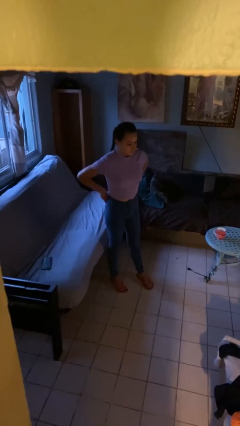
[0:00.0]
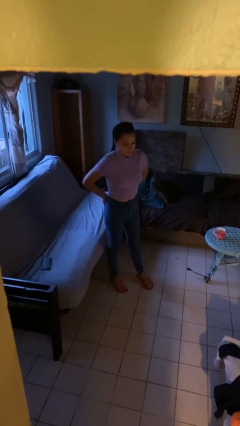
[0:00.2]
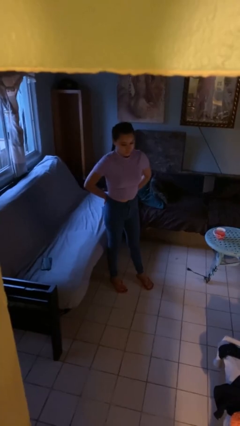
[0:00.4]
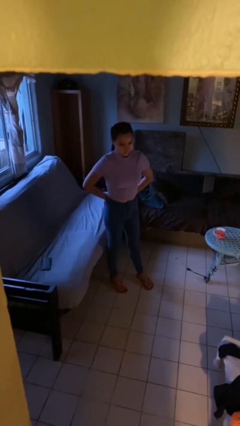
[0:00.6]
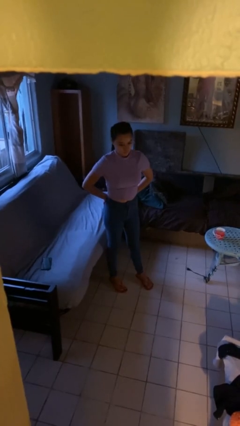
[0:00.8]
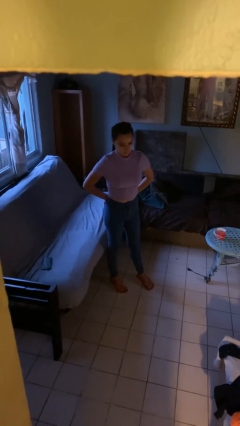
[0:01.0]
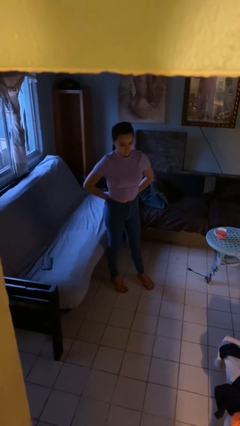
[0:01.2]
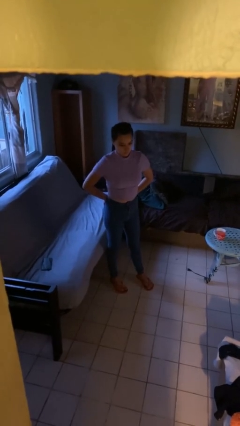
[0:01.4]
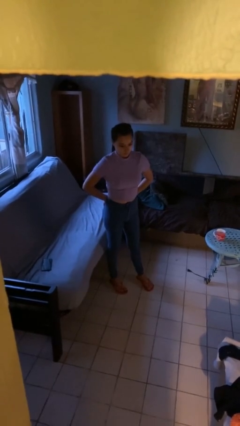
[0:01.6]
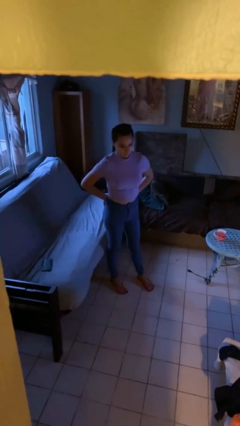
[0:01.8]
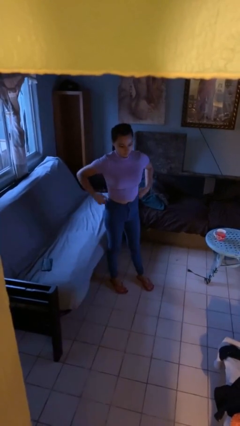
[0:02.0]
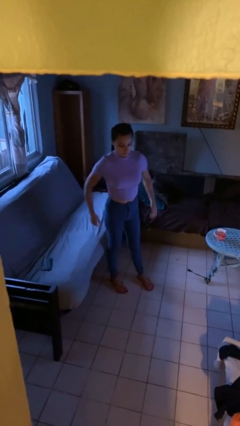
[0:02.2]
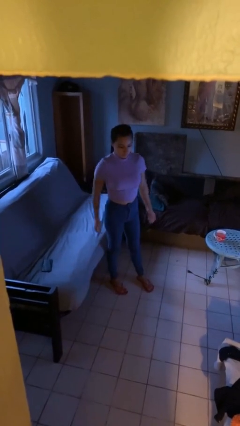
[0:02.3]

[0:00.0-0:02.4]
person puts hands in back pockets

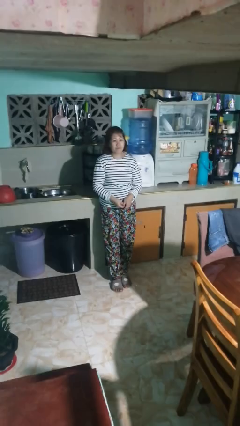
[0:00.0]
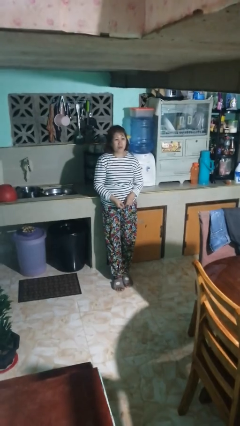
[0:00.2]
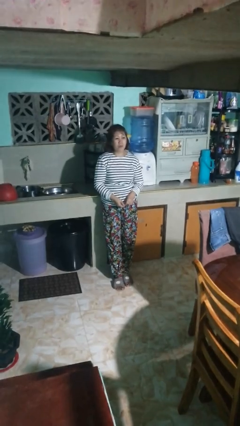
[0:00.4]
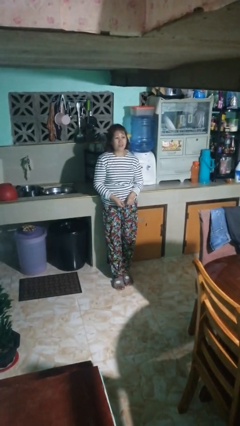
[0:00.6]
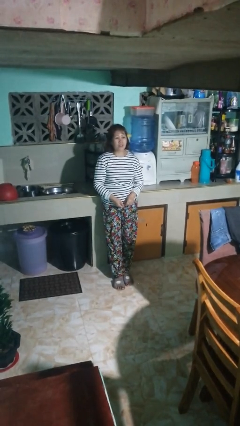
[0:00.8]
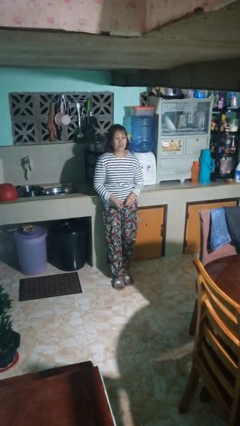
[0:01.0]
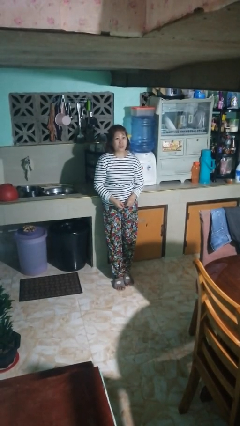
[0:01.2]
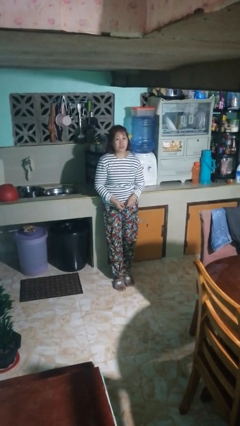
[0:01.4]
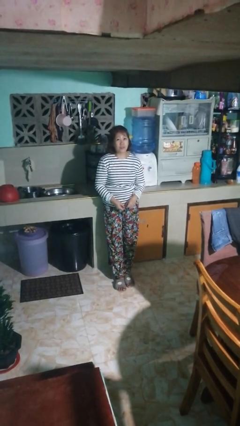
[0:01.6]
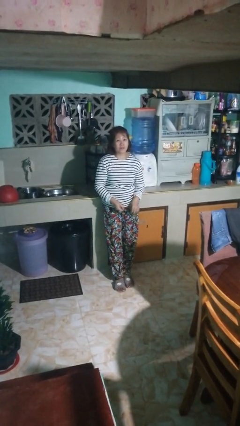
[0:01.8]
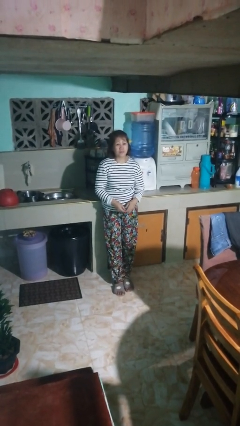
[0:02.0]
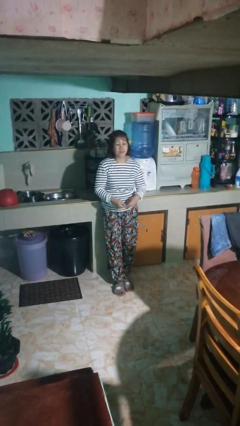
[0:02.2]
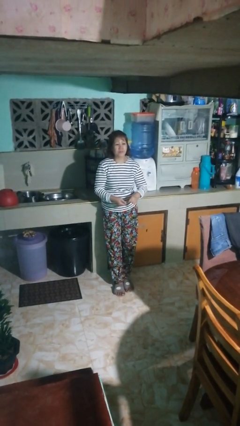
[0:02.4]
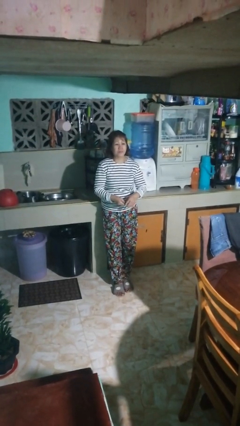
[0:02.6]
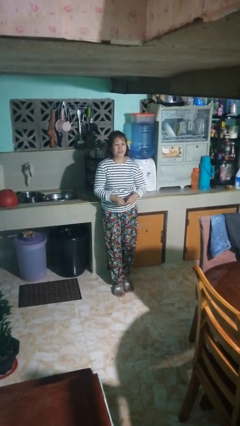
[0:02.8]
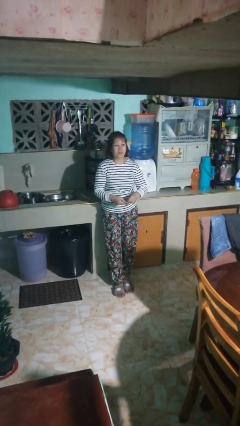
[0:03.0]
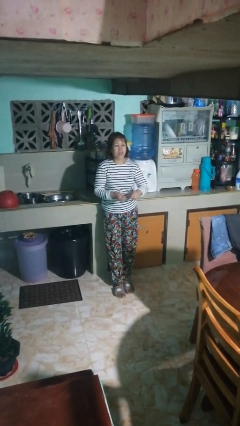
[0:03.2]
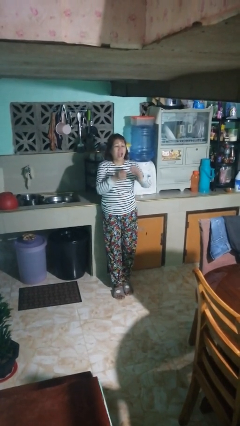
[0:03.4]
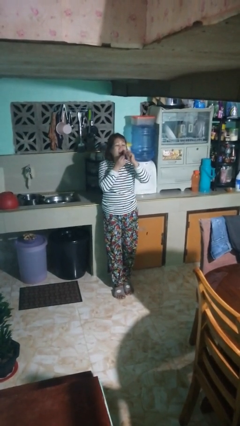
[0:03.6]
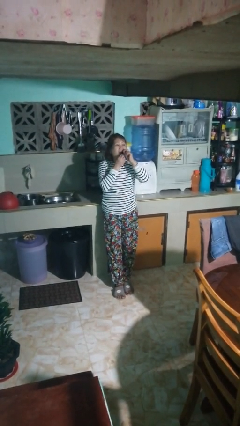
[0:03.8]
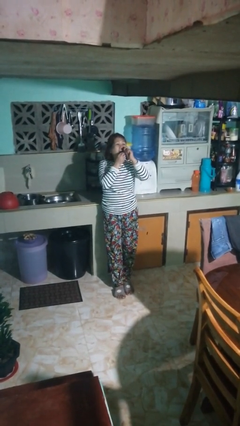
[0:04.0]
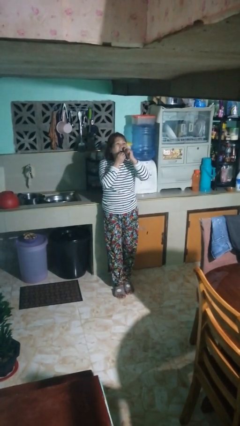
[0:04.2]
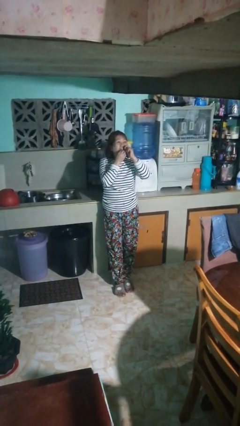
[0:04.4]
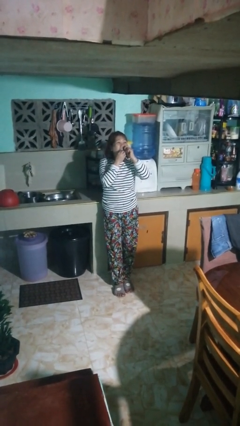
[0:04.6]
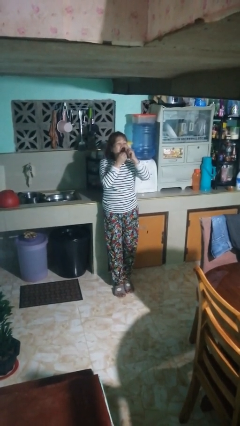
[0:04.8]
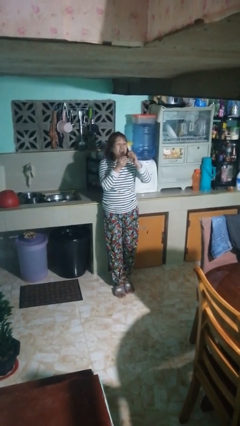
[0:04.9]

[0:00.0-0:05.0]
person flosses

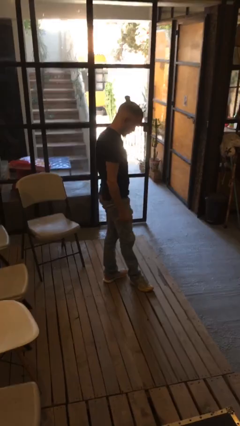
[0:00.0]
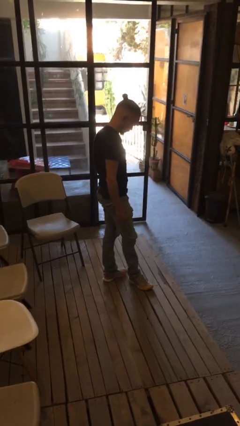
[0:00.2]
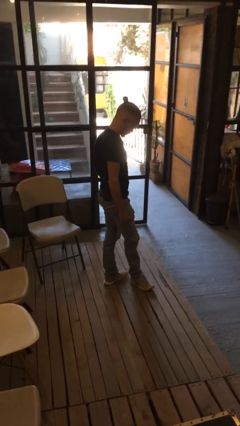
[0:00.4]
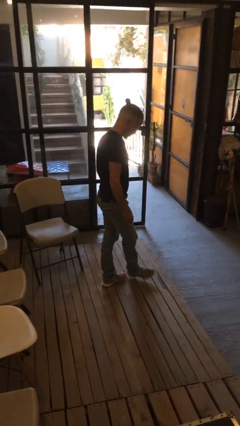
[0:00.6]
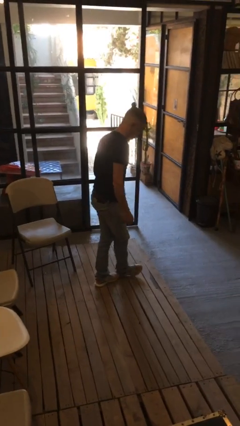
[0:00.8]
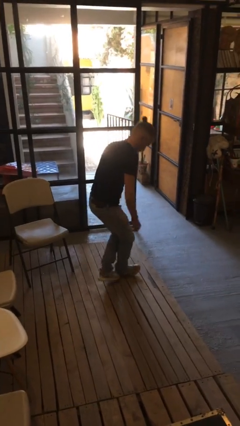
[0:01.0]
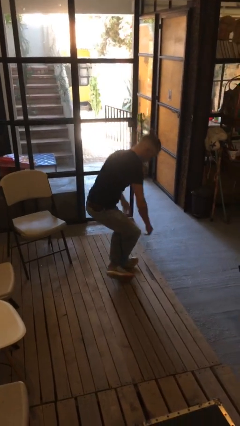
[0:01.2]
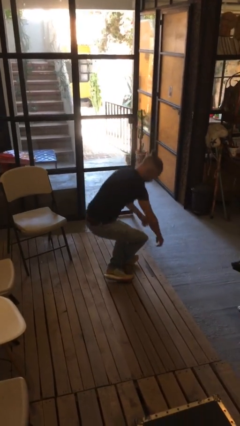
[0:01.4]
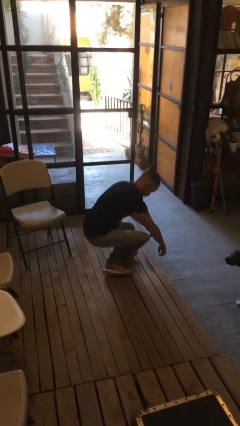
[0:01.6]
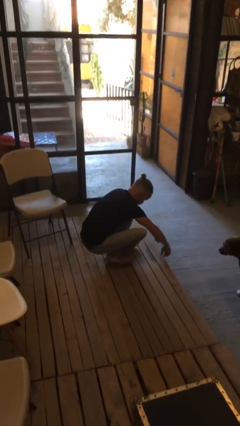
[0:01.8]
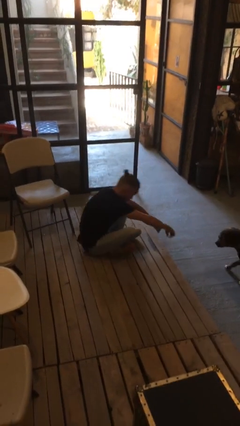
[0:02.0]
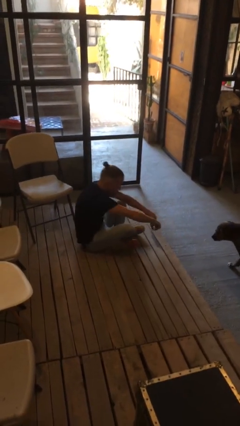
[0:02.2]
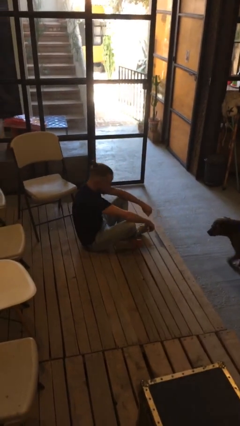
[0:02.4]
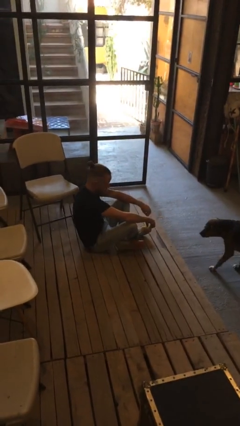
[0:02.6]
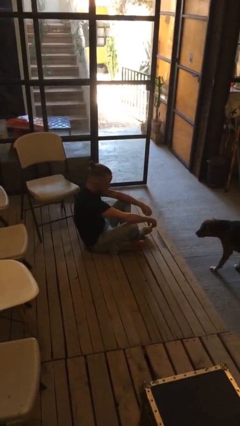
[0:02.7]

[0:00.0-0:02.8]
person sits crisscross

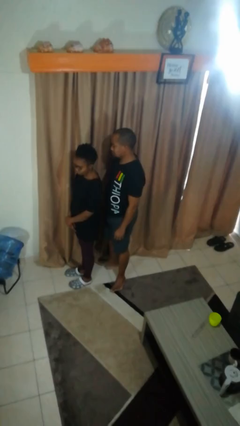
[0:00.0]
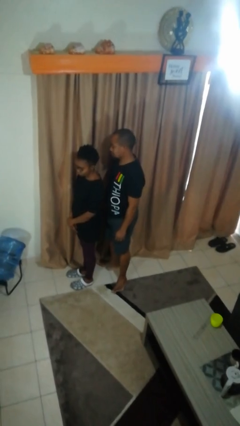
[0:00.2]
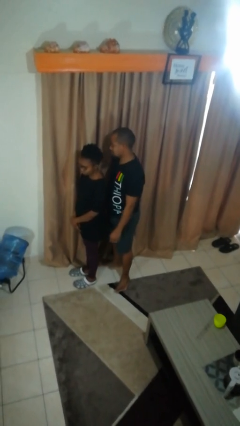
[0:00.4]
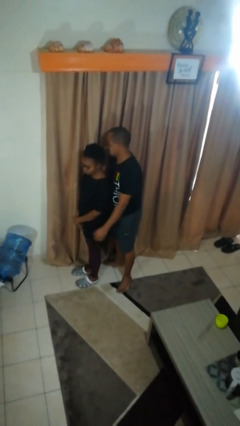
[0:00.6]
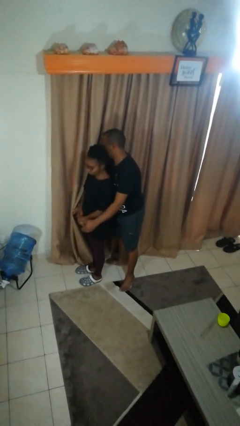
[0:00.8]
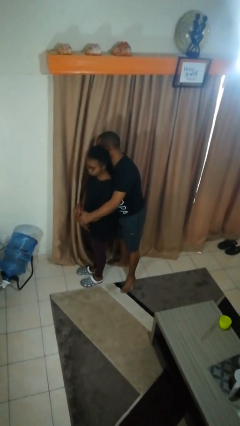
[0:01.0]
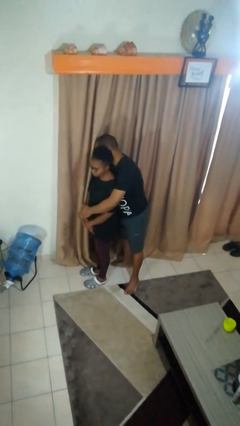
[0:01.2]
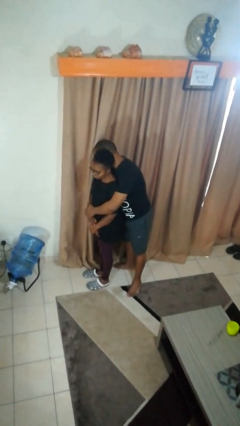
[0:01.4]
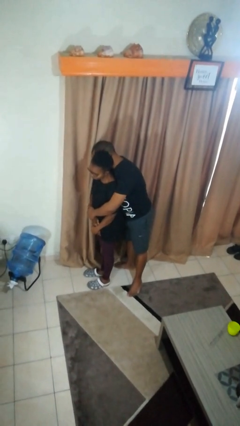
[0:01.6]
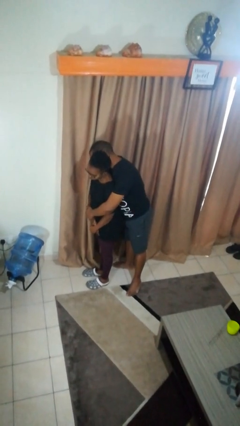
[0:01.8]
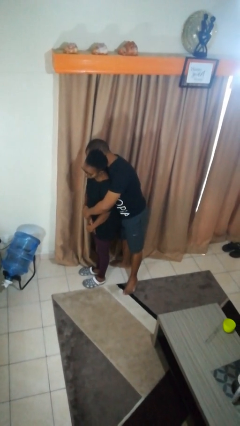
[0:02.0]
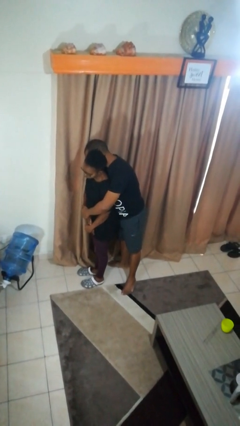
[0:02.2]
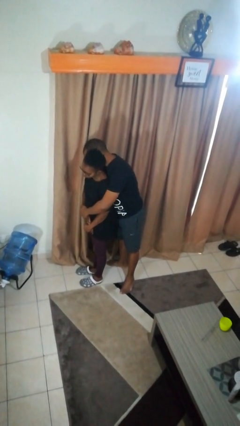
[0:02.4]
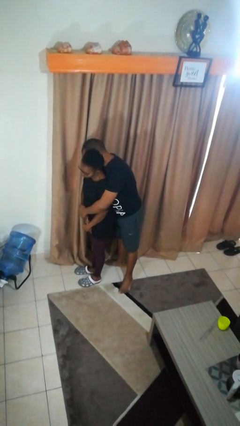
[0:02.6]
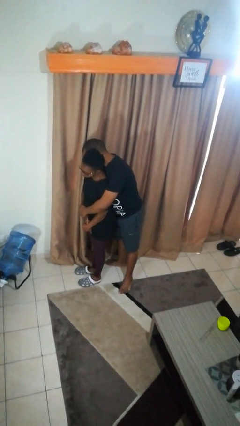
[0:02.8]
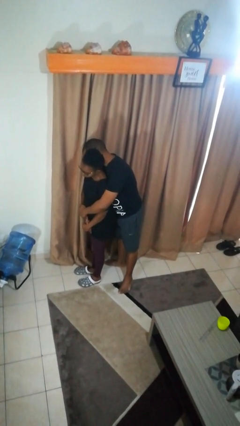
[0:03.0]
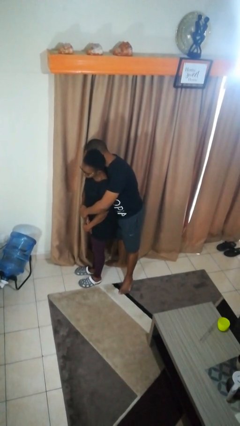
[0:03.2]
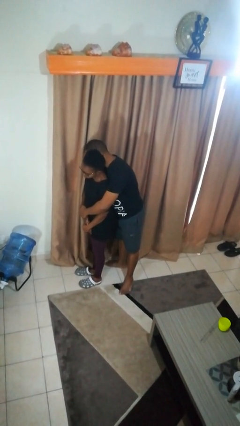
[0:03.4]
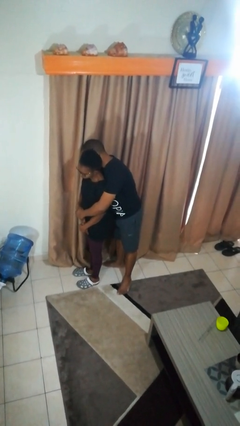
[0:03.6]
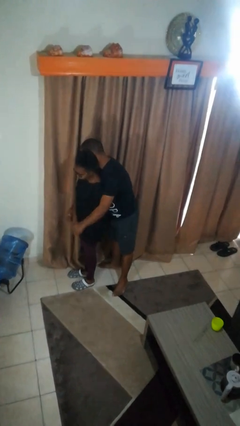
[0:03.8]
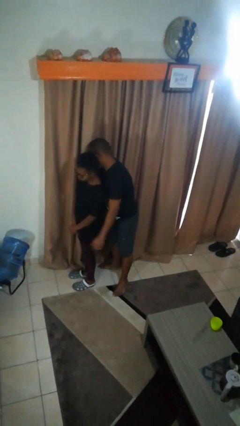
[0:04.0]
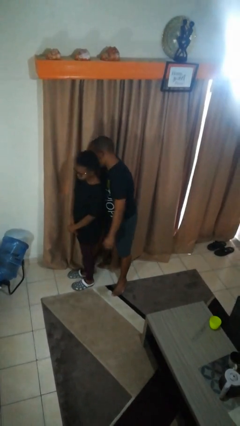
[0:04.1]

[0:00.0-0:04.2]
person hugs person from behind

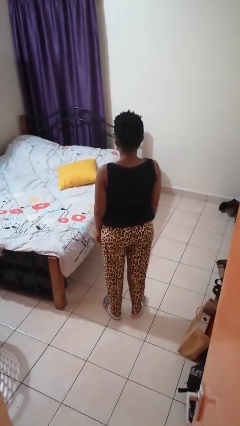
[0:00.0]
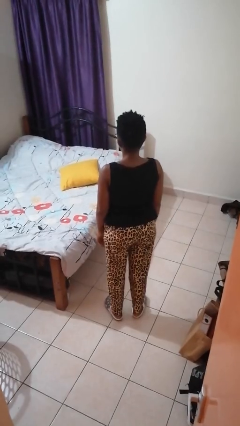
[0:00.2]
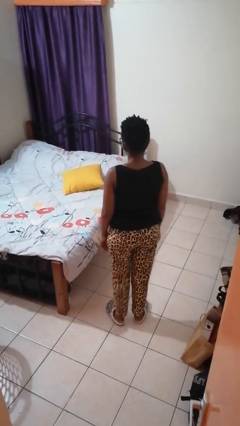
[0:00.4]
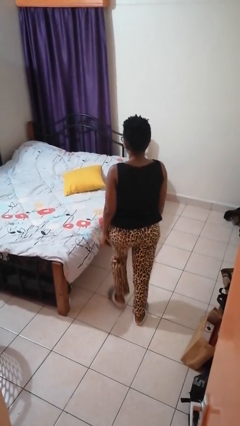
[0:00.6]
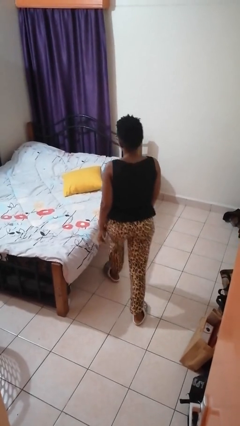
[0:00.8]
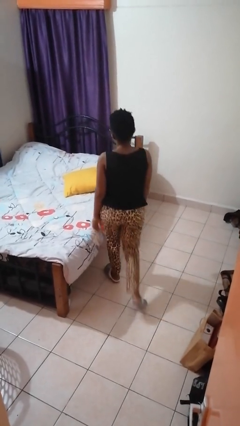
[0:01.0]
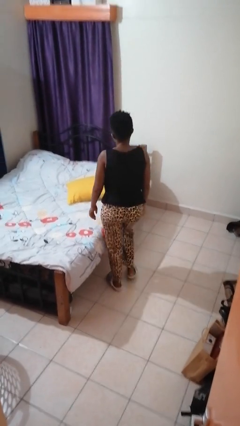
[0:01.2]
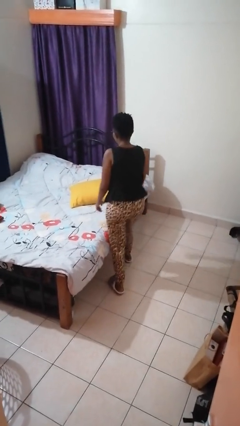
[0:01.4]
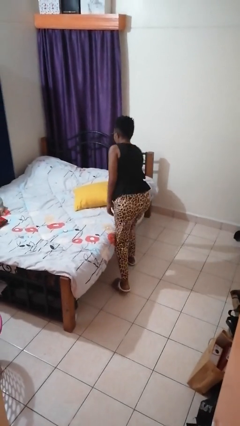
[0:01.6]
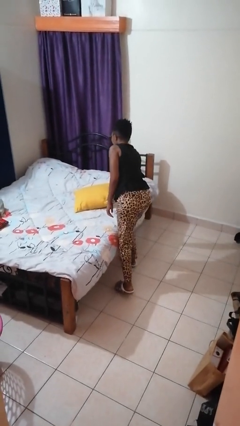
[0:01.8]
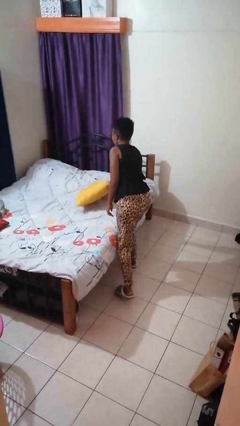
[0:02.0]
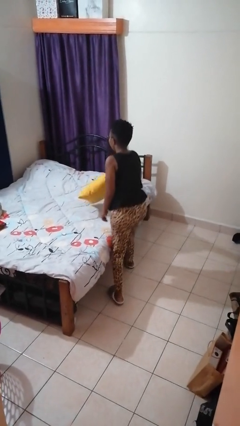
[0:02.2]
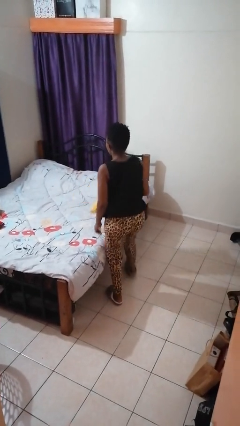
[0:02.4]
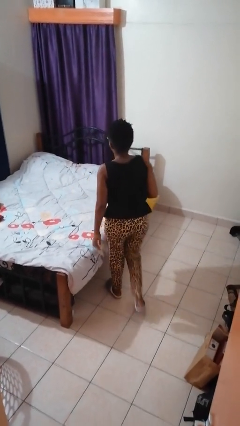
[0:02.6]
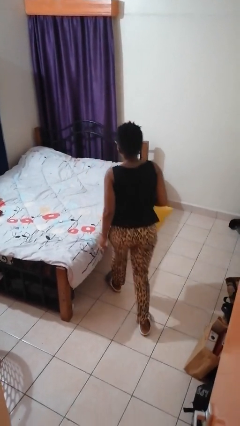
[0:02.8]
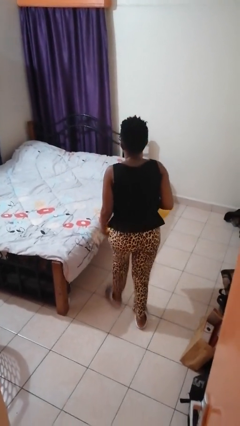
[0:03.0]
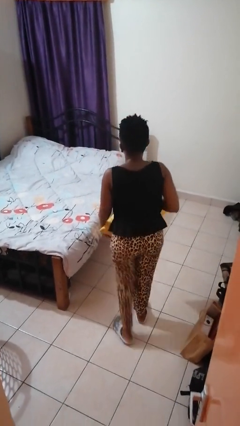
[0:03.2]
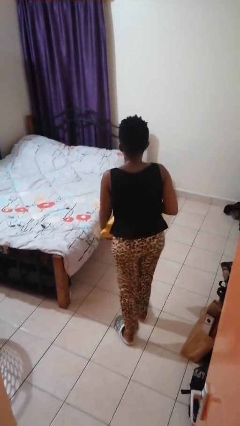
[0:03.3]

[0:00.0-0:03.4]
person picks up object from bed

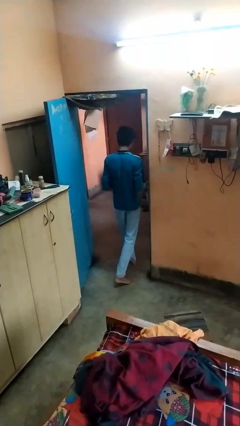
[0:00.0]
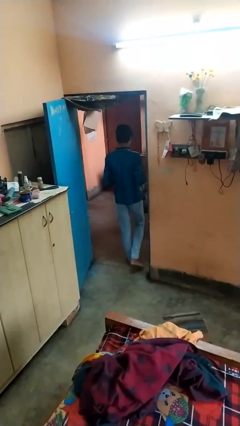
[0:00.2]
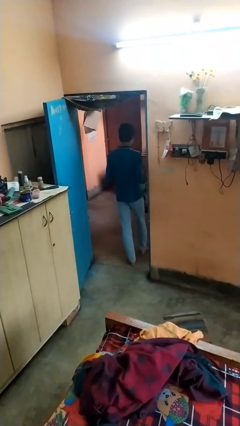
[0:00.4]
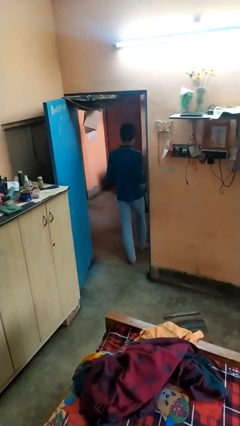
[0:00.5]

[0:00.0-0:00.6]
person exits scene through structure
